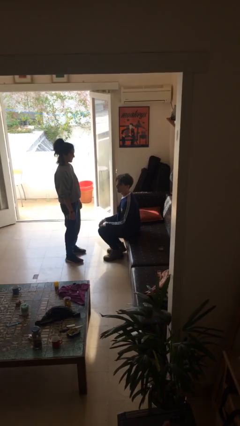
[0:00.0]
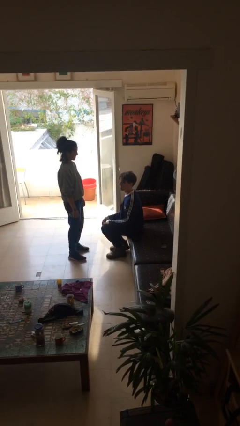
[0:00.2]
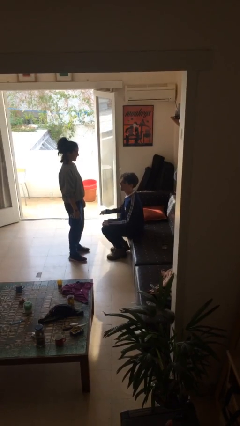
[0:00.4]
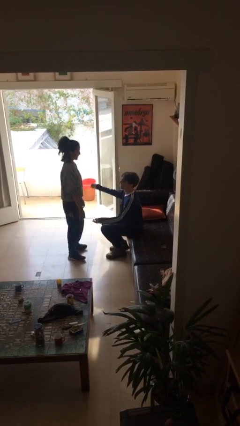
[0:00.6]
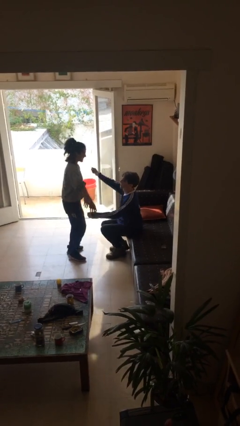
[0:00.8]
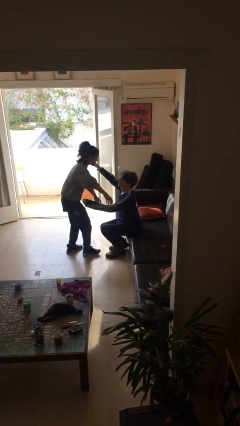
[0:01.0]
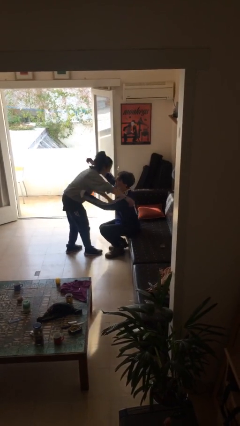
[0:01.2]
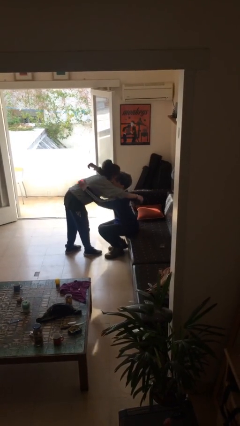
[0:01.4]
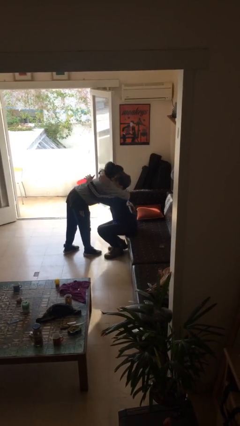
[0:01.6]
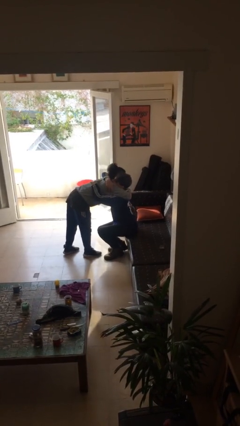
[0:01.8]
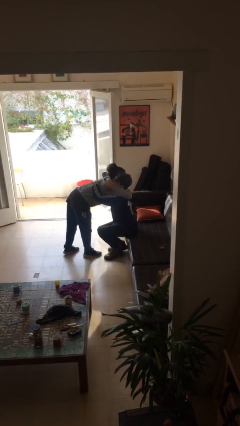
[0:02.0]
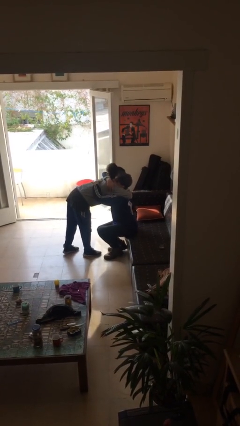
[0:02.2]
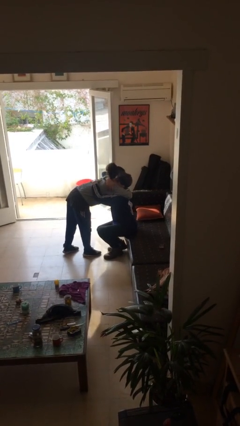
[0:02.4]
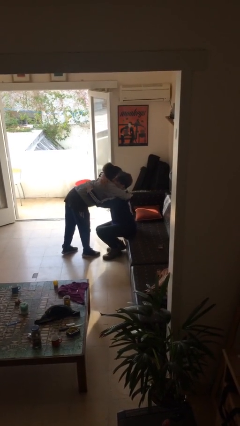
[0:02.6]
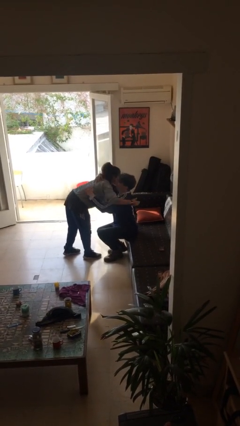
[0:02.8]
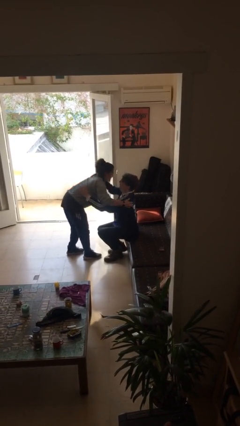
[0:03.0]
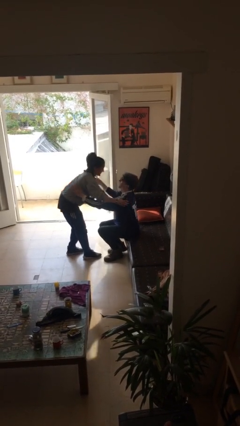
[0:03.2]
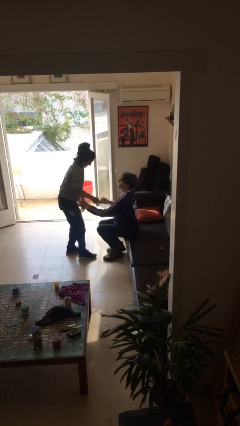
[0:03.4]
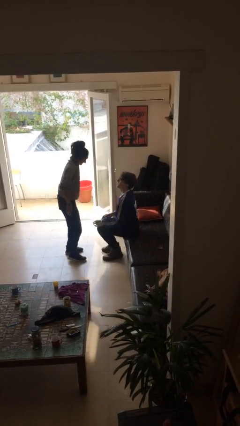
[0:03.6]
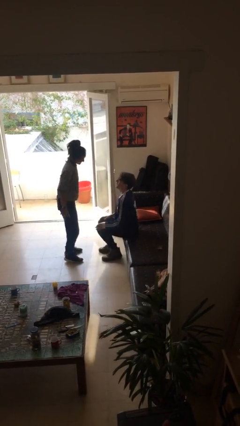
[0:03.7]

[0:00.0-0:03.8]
person embraces person

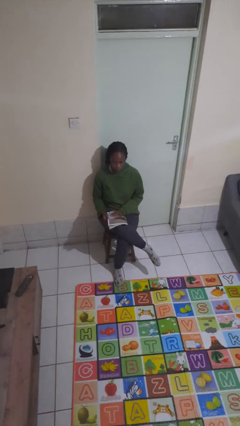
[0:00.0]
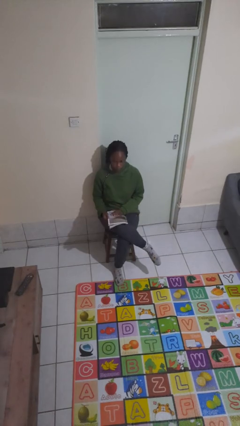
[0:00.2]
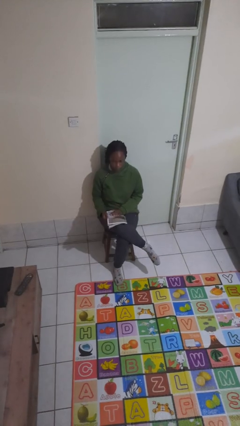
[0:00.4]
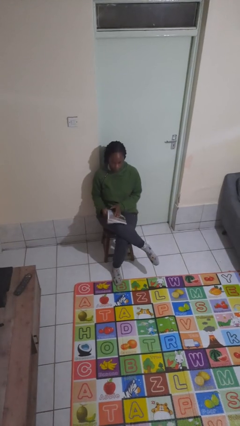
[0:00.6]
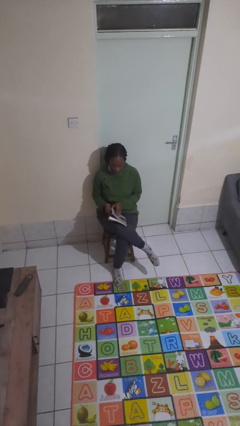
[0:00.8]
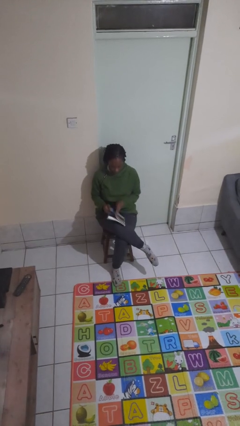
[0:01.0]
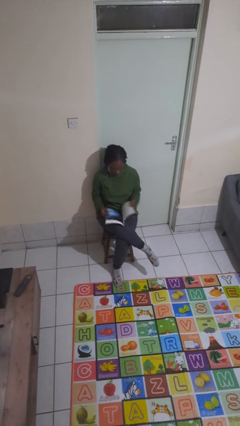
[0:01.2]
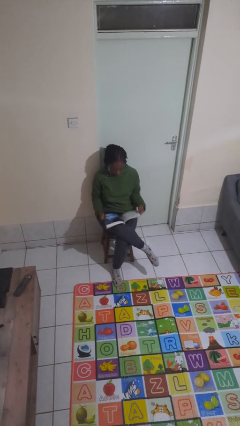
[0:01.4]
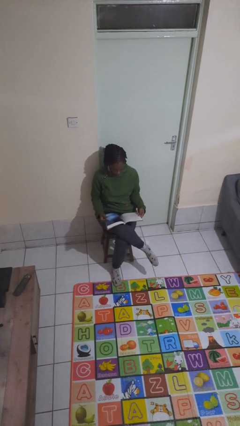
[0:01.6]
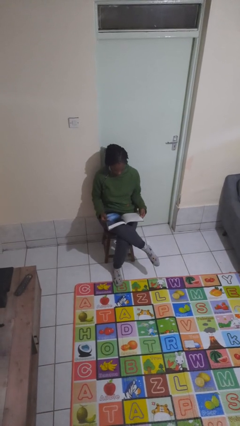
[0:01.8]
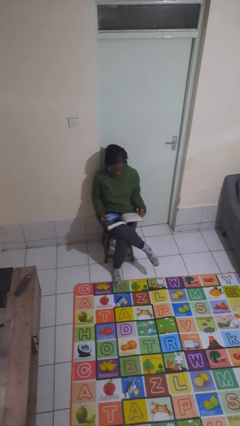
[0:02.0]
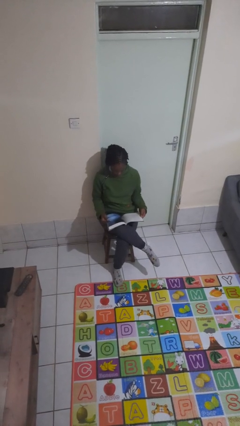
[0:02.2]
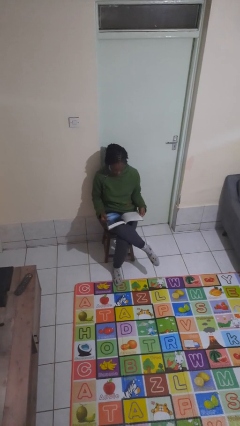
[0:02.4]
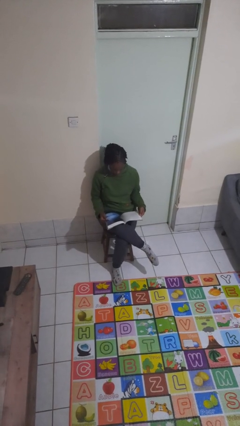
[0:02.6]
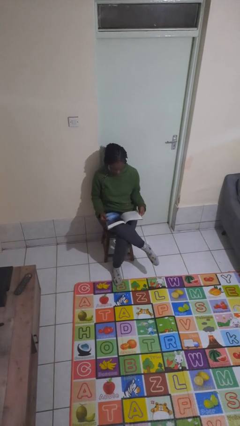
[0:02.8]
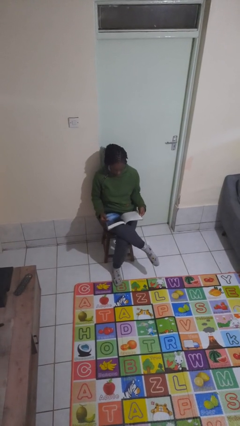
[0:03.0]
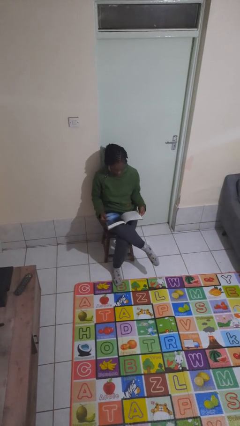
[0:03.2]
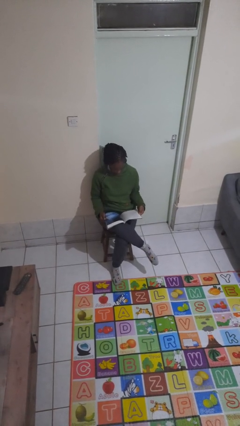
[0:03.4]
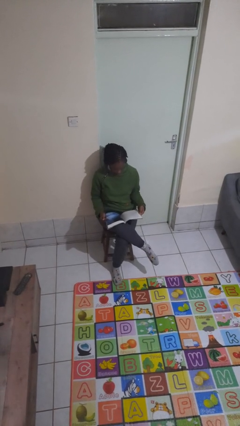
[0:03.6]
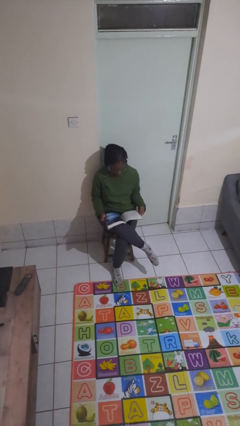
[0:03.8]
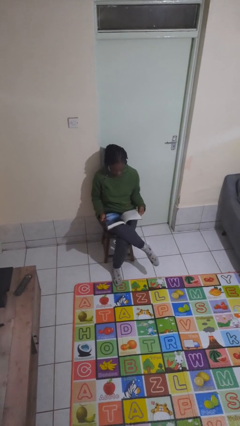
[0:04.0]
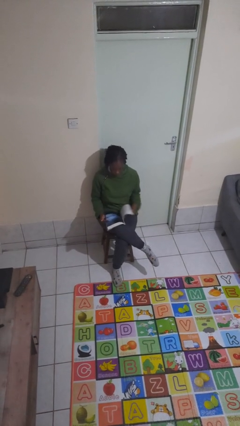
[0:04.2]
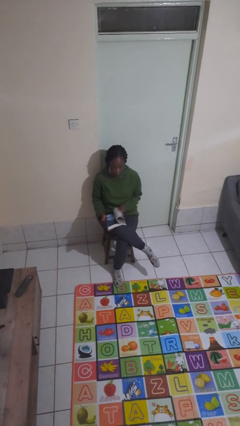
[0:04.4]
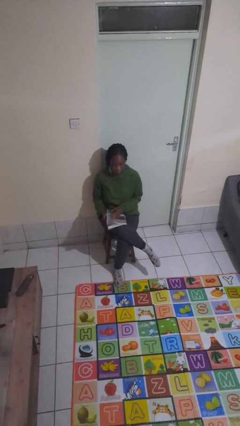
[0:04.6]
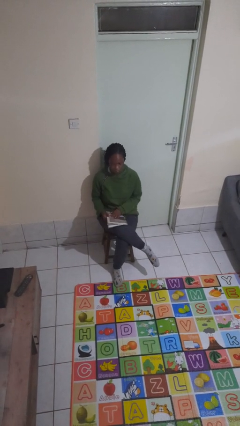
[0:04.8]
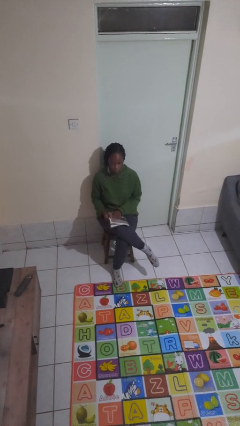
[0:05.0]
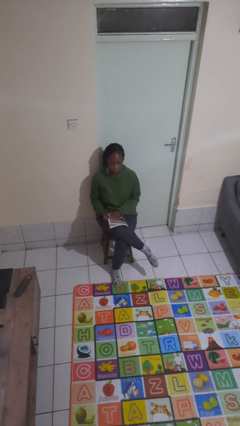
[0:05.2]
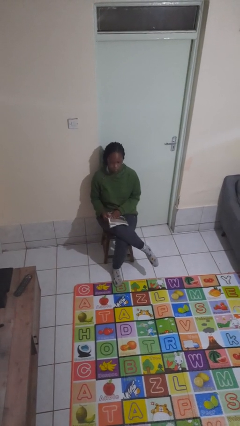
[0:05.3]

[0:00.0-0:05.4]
person reads magazine

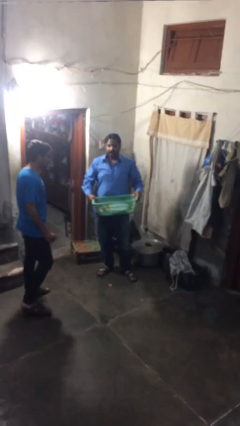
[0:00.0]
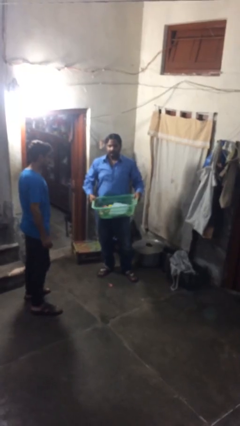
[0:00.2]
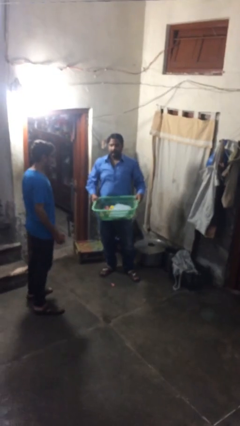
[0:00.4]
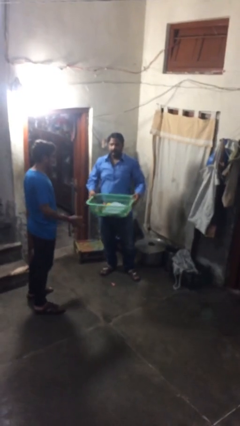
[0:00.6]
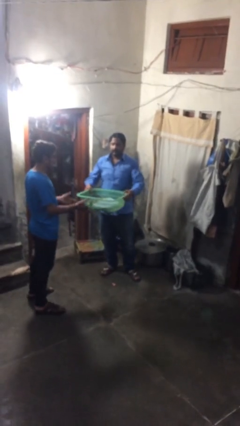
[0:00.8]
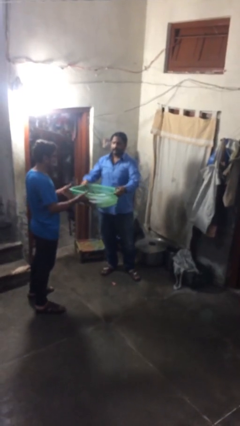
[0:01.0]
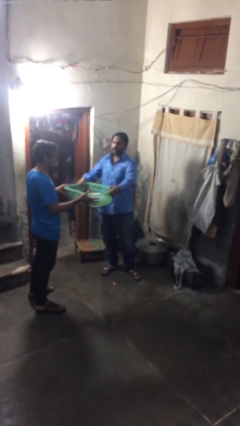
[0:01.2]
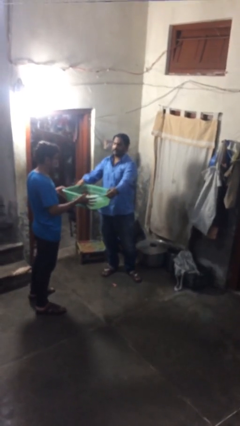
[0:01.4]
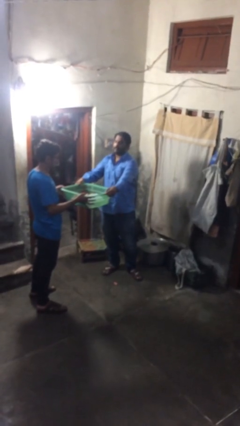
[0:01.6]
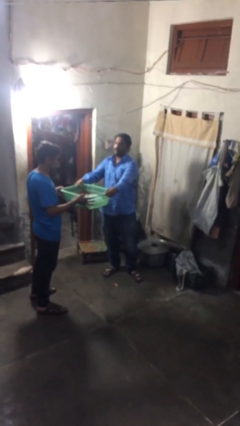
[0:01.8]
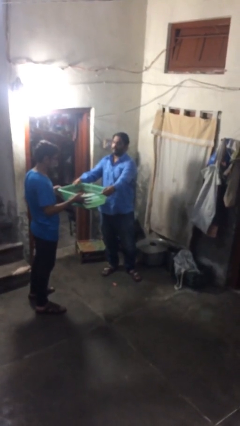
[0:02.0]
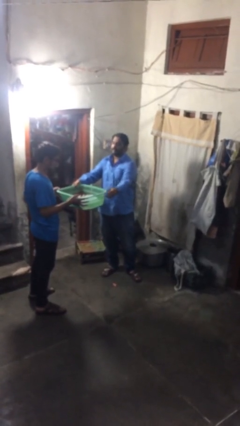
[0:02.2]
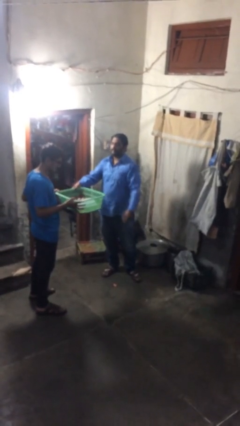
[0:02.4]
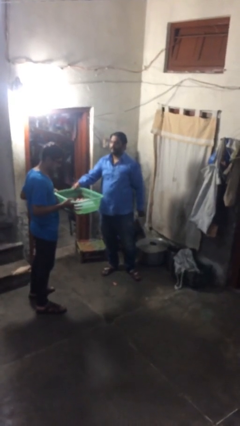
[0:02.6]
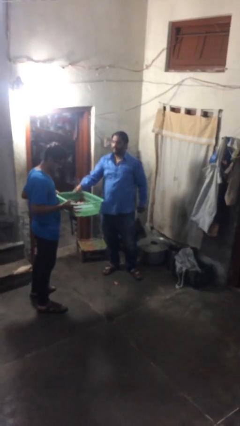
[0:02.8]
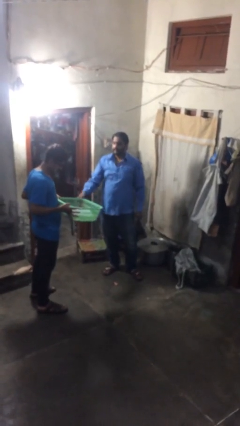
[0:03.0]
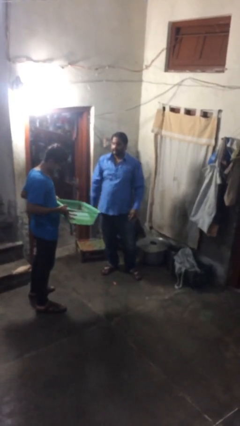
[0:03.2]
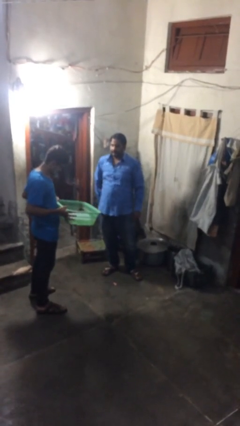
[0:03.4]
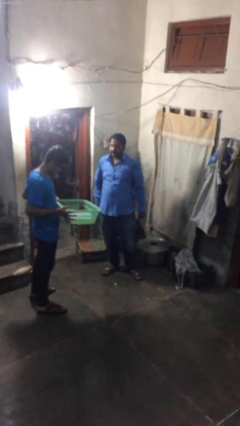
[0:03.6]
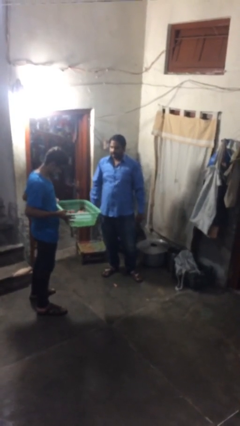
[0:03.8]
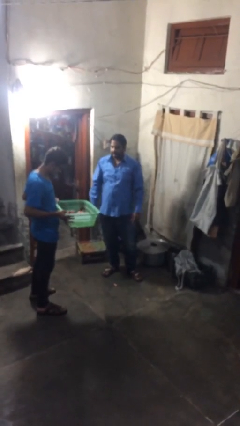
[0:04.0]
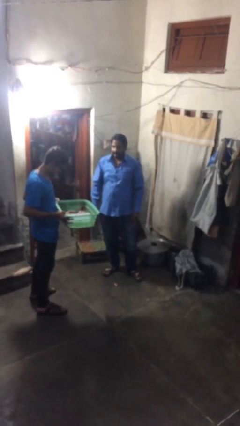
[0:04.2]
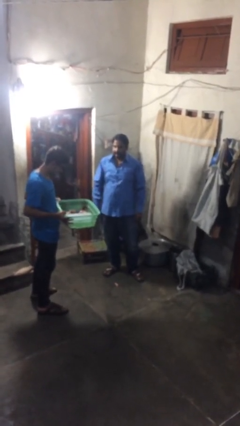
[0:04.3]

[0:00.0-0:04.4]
person transfers object to person

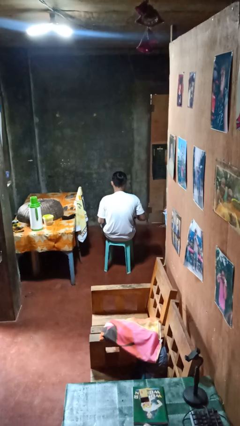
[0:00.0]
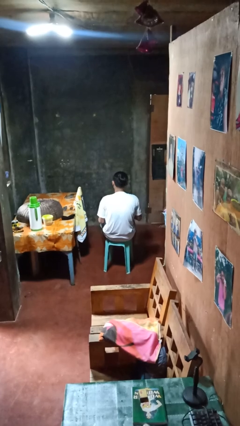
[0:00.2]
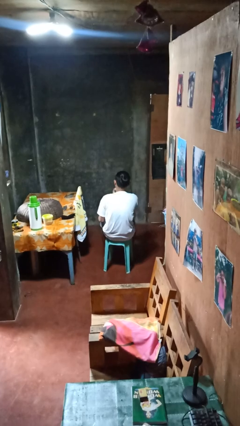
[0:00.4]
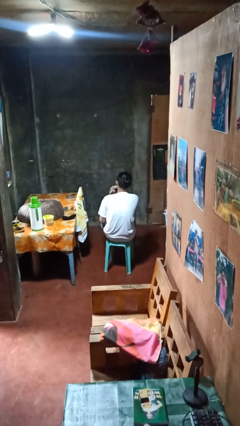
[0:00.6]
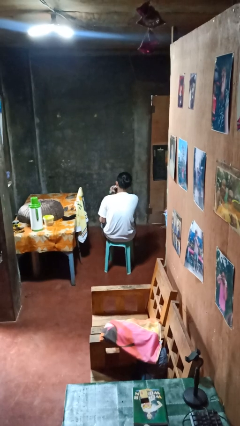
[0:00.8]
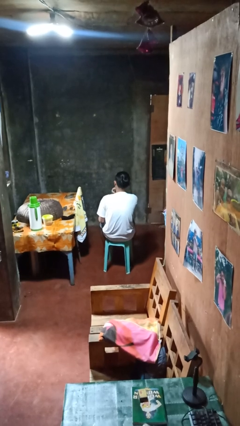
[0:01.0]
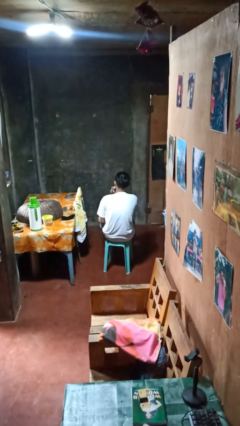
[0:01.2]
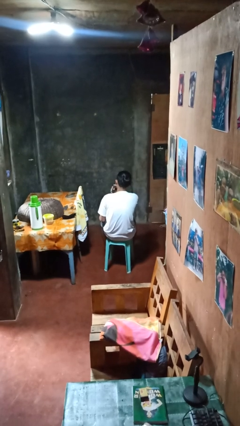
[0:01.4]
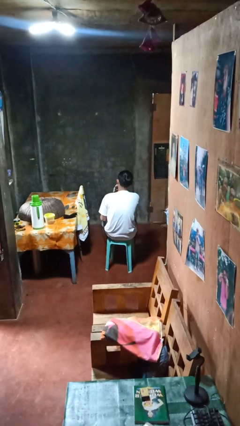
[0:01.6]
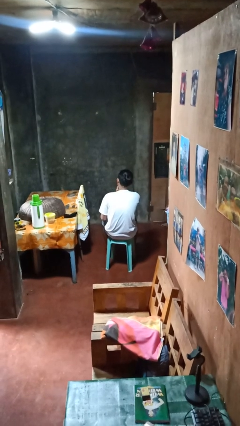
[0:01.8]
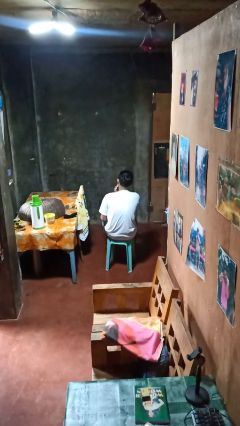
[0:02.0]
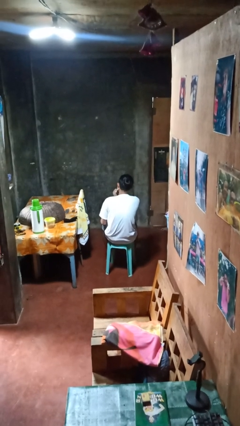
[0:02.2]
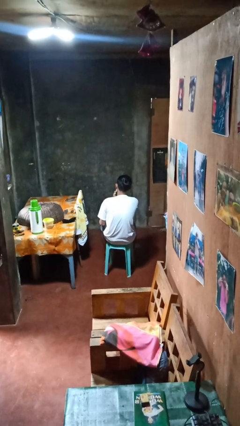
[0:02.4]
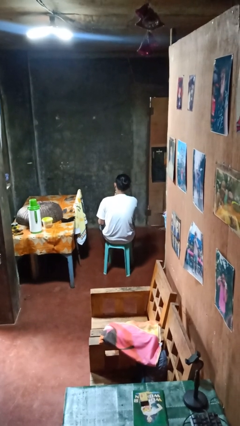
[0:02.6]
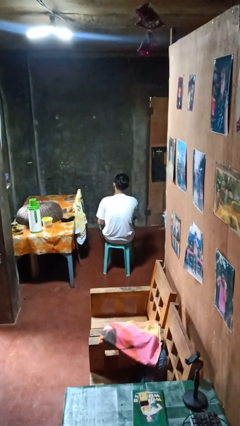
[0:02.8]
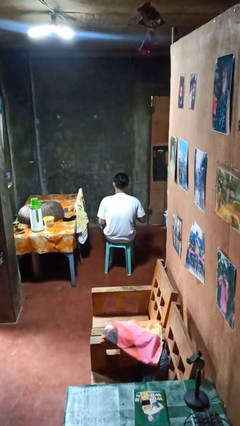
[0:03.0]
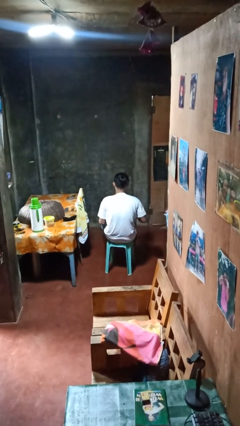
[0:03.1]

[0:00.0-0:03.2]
person shaves face

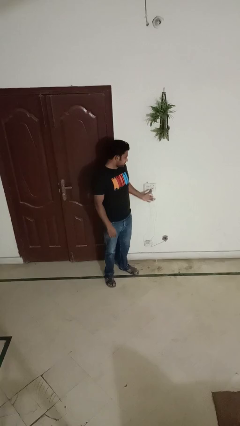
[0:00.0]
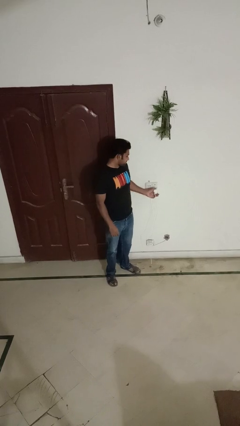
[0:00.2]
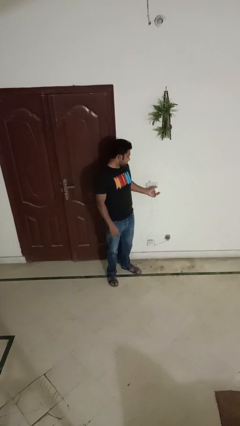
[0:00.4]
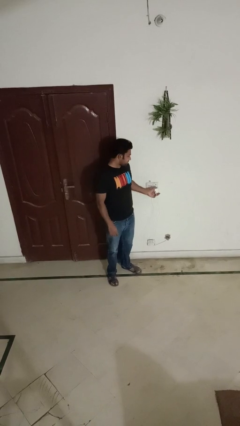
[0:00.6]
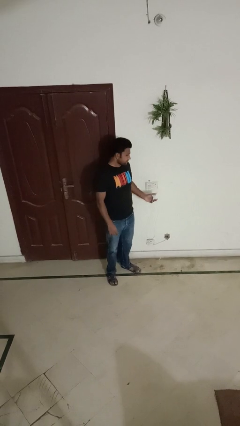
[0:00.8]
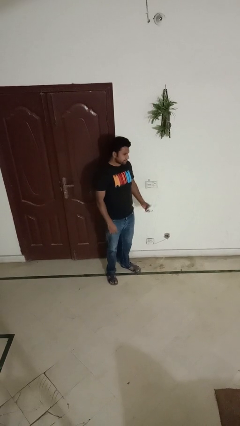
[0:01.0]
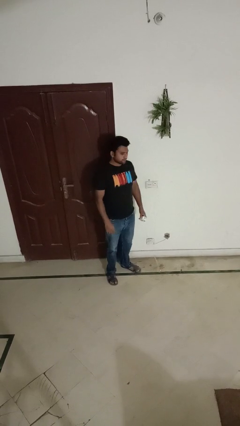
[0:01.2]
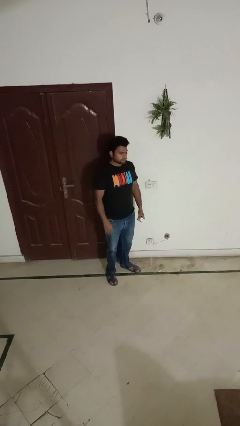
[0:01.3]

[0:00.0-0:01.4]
person unplugs from electrical socket
